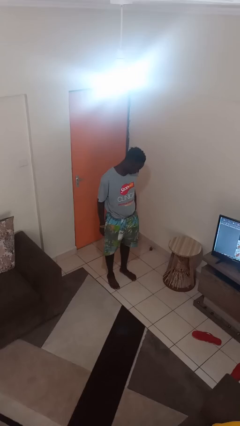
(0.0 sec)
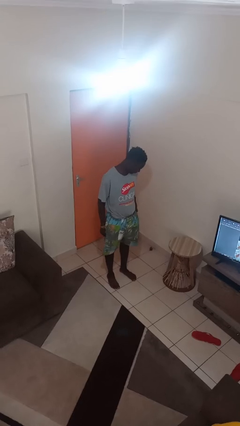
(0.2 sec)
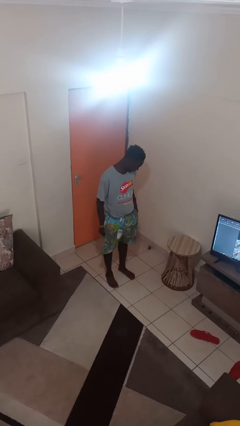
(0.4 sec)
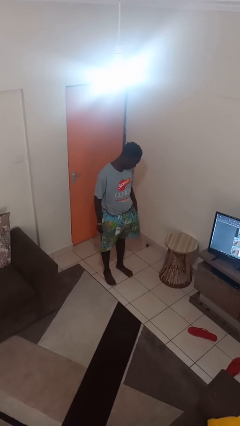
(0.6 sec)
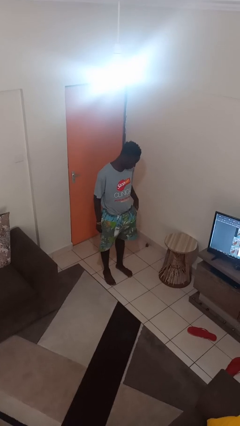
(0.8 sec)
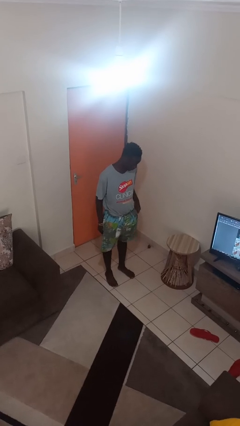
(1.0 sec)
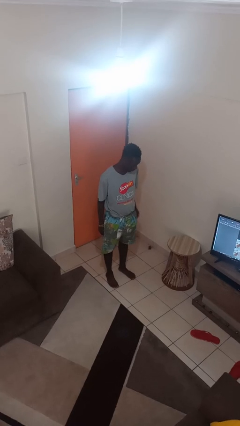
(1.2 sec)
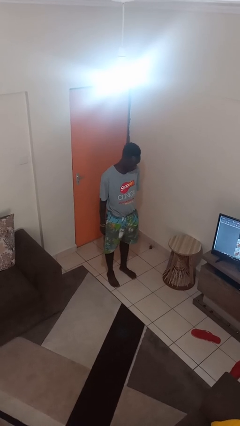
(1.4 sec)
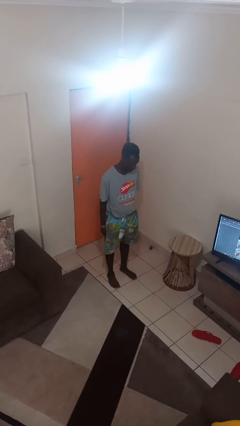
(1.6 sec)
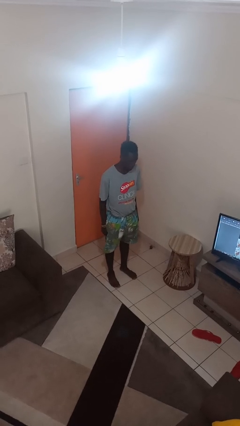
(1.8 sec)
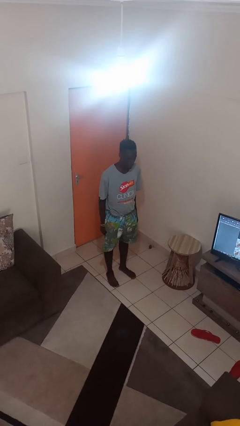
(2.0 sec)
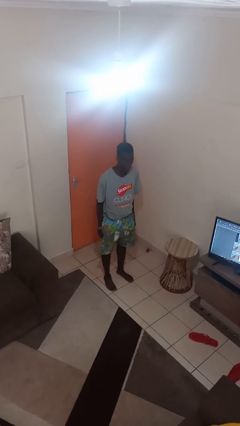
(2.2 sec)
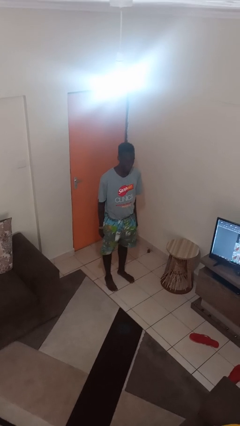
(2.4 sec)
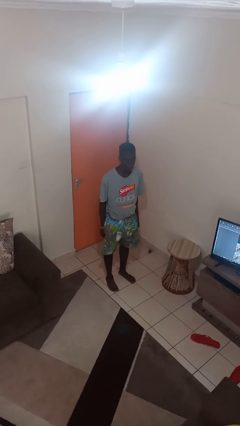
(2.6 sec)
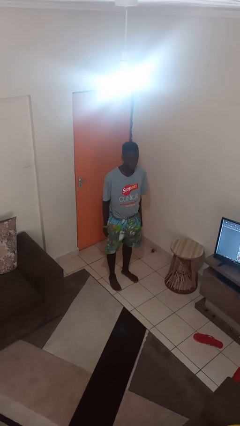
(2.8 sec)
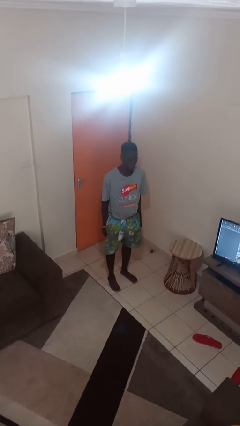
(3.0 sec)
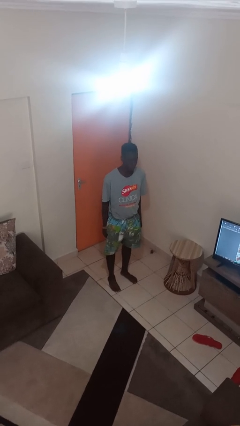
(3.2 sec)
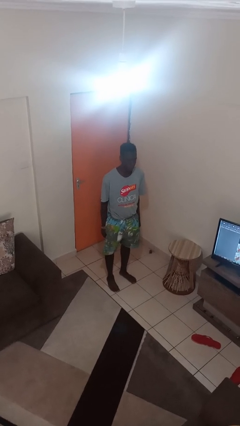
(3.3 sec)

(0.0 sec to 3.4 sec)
person puts phone into pocket

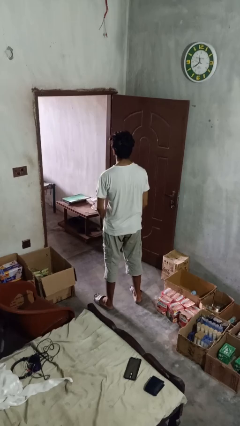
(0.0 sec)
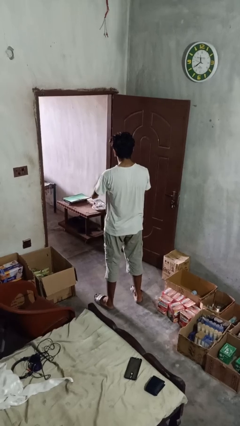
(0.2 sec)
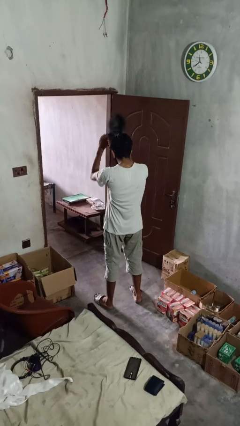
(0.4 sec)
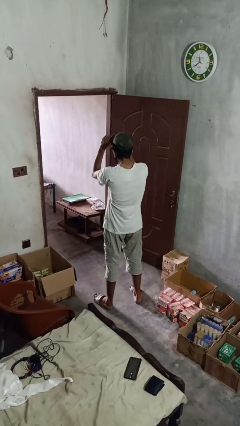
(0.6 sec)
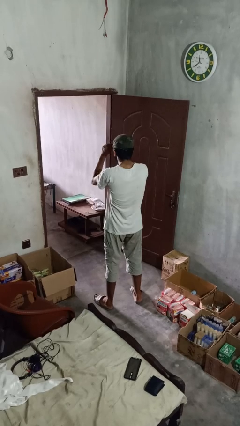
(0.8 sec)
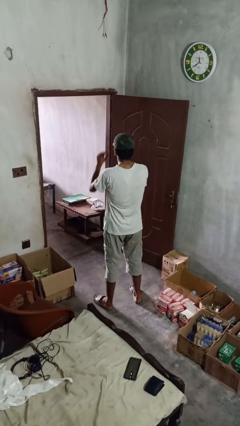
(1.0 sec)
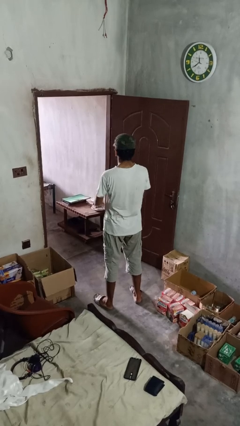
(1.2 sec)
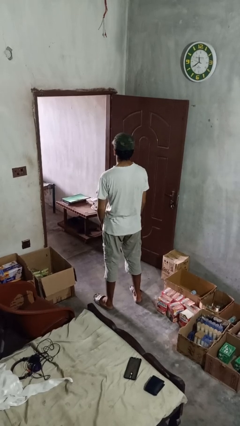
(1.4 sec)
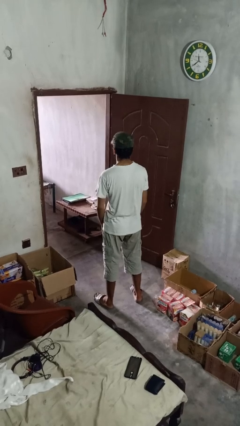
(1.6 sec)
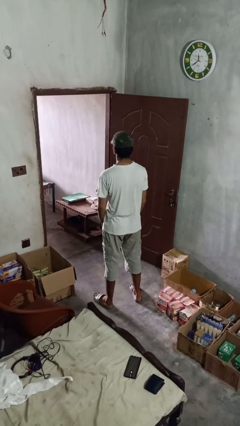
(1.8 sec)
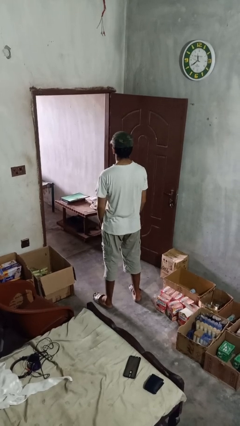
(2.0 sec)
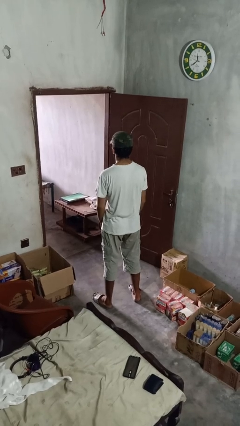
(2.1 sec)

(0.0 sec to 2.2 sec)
person puts on hat

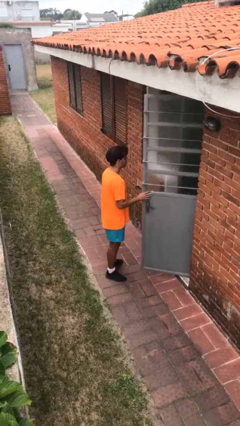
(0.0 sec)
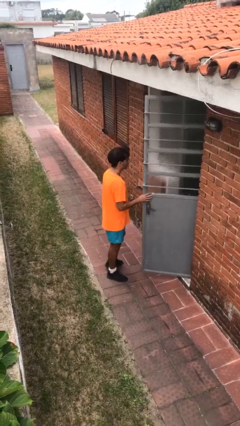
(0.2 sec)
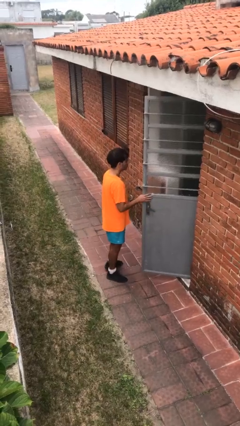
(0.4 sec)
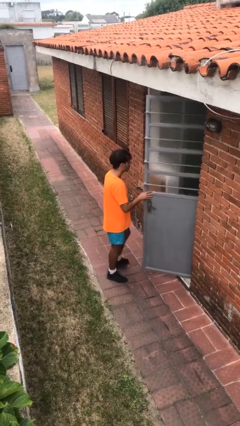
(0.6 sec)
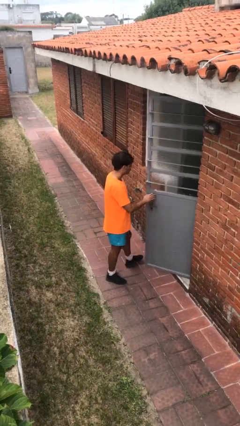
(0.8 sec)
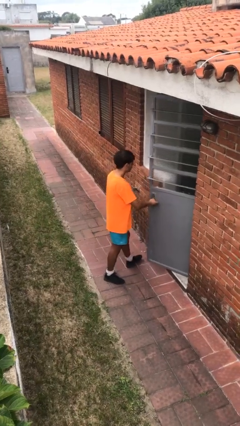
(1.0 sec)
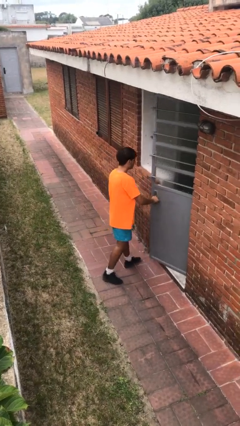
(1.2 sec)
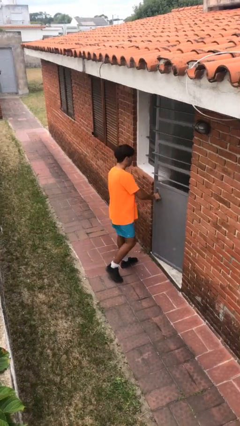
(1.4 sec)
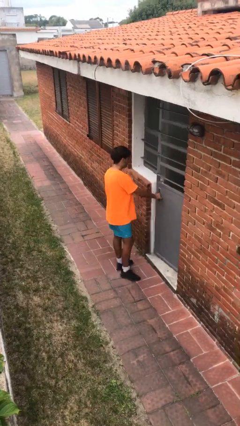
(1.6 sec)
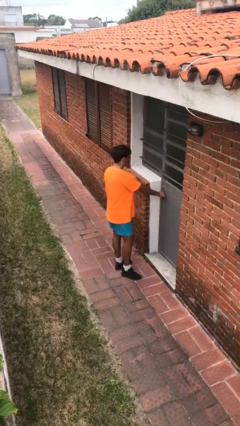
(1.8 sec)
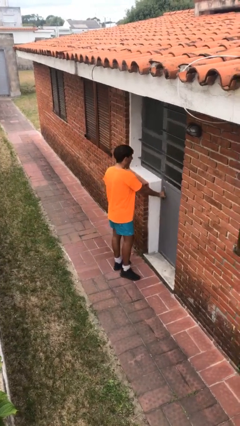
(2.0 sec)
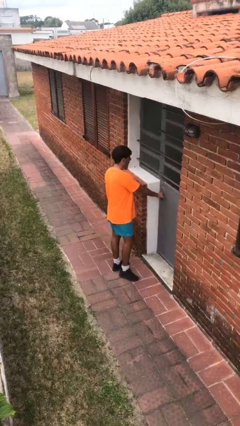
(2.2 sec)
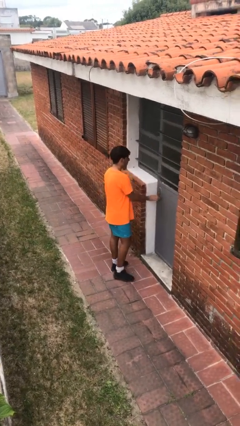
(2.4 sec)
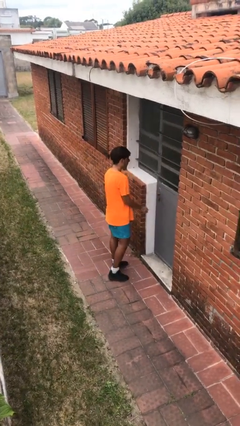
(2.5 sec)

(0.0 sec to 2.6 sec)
person closes facility door

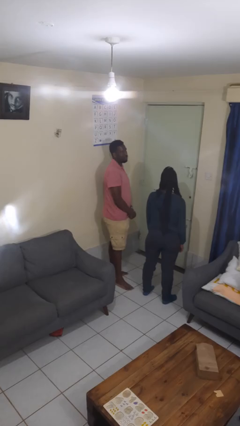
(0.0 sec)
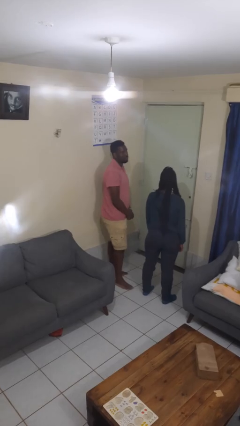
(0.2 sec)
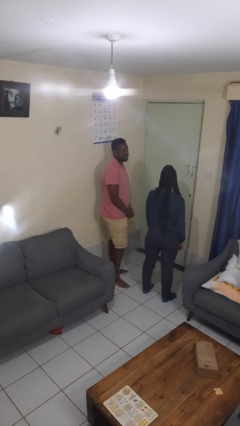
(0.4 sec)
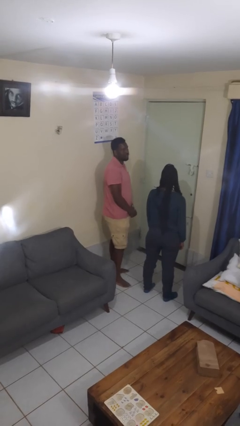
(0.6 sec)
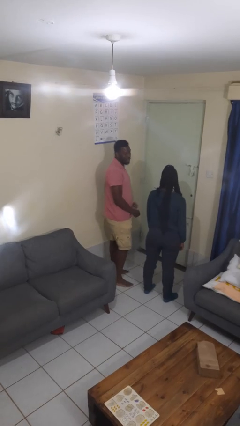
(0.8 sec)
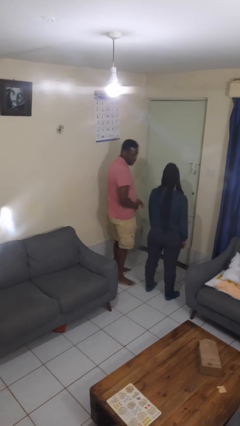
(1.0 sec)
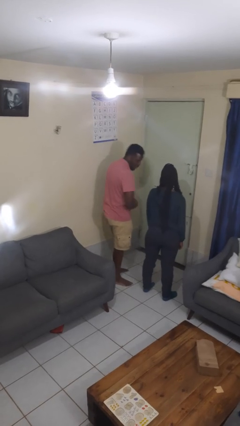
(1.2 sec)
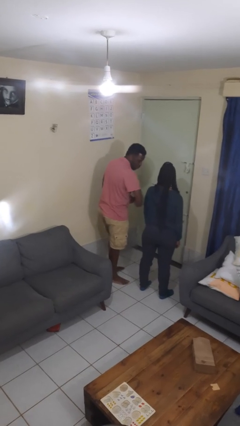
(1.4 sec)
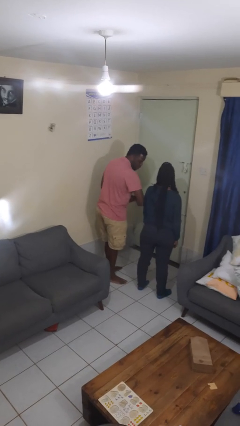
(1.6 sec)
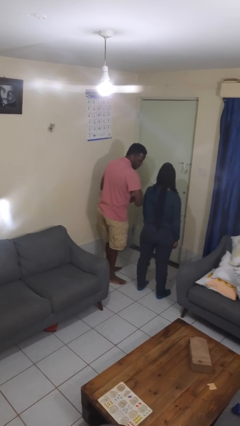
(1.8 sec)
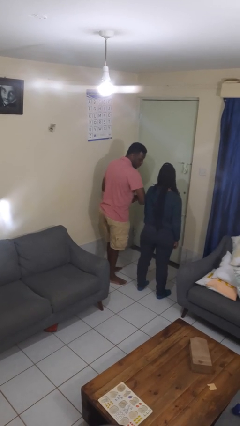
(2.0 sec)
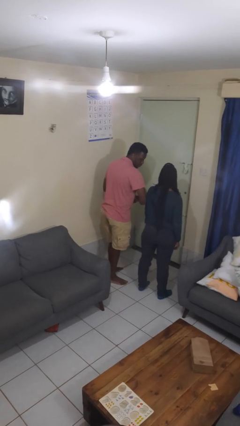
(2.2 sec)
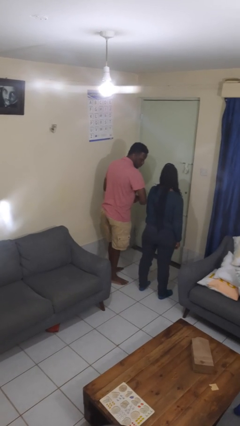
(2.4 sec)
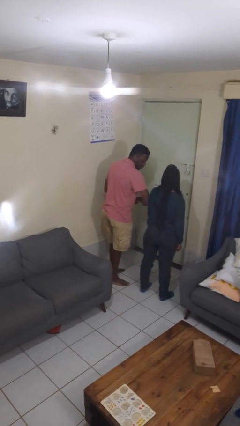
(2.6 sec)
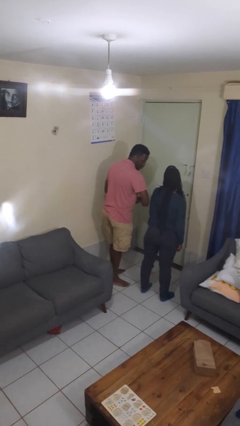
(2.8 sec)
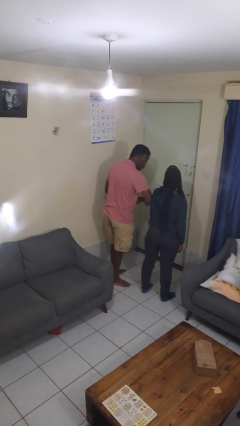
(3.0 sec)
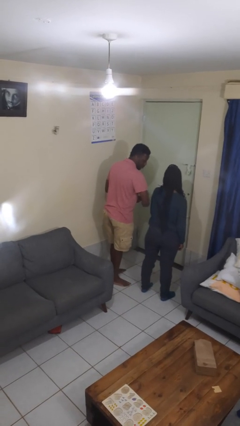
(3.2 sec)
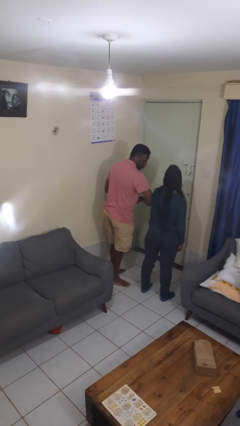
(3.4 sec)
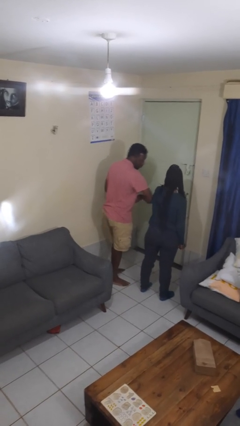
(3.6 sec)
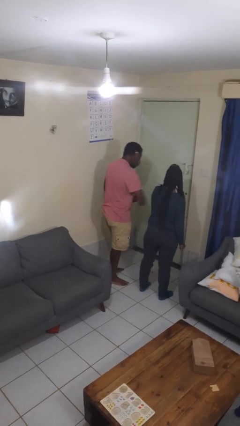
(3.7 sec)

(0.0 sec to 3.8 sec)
person nudges person with elbow

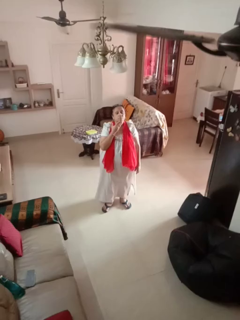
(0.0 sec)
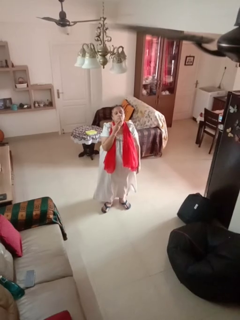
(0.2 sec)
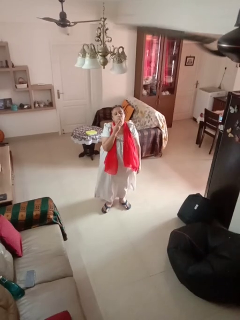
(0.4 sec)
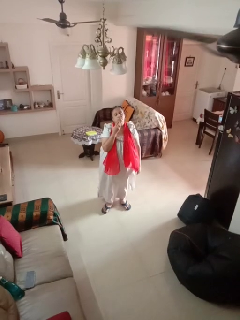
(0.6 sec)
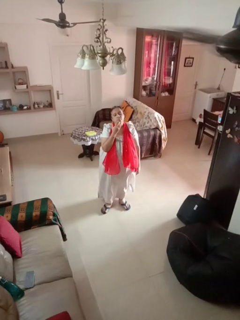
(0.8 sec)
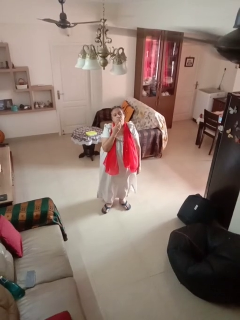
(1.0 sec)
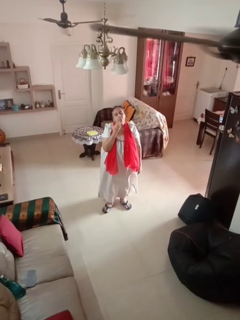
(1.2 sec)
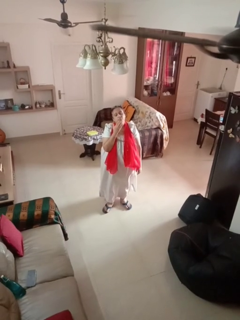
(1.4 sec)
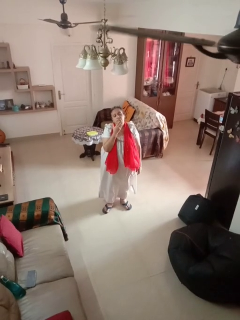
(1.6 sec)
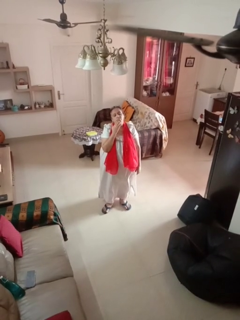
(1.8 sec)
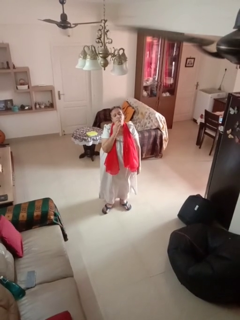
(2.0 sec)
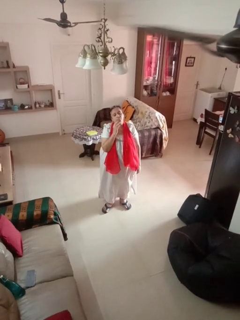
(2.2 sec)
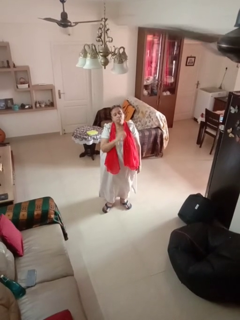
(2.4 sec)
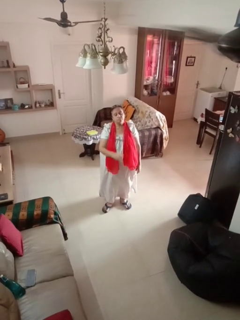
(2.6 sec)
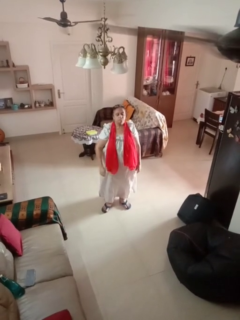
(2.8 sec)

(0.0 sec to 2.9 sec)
person scratches face

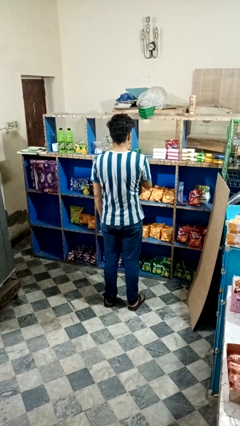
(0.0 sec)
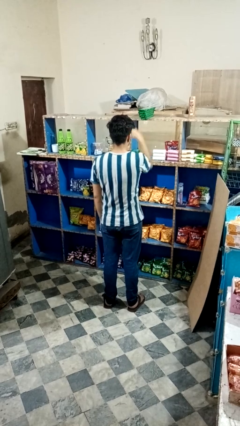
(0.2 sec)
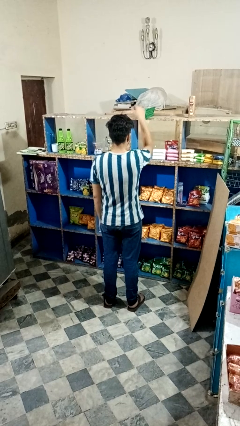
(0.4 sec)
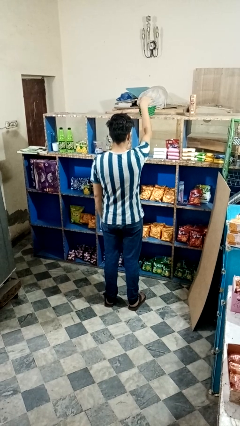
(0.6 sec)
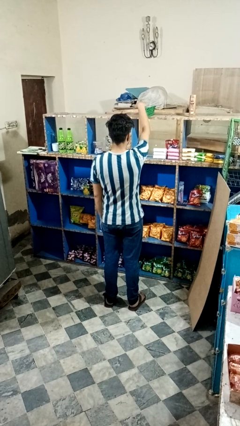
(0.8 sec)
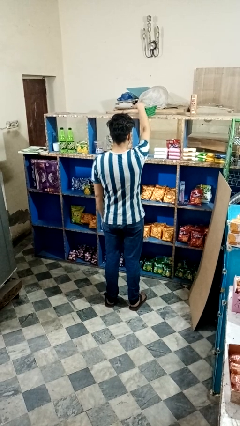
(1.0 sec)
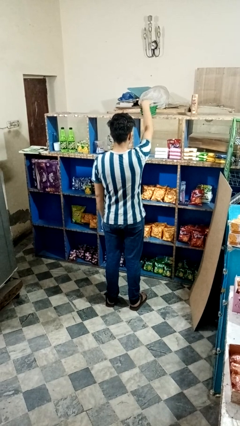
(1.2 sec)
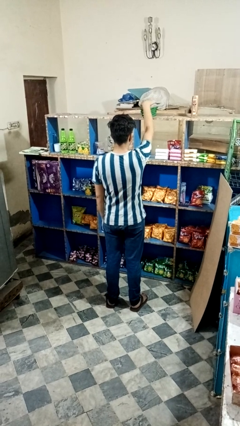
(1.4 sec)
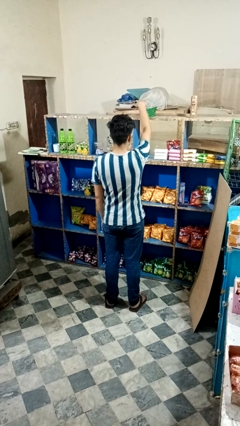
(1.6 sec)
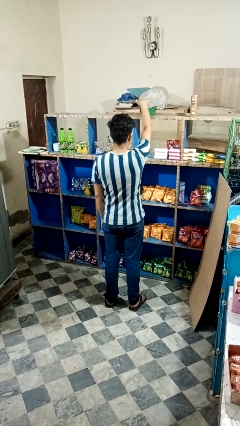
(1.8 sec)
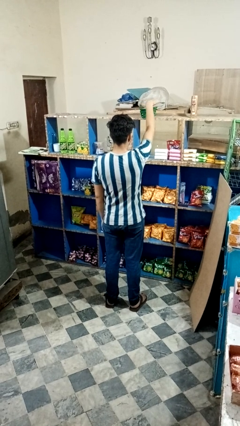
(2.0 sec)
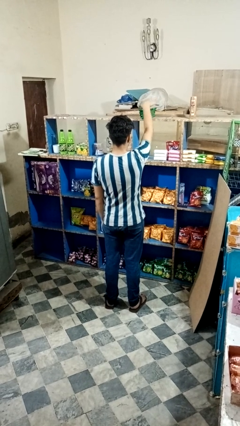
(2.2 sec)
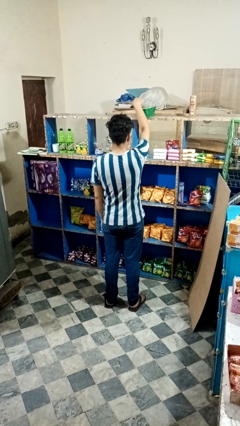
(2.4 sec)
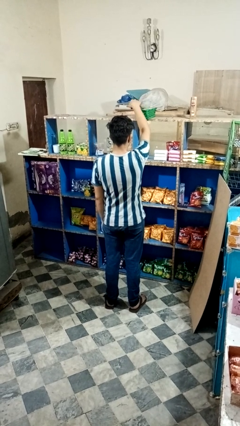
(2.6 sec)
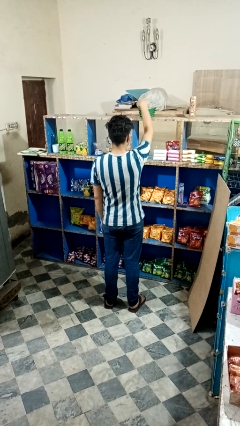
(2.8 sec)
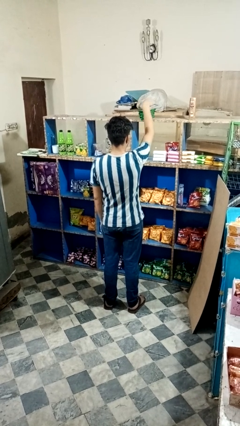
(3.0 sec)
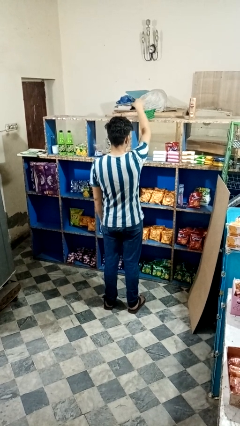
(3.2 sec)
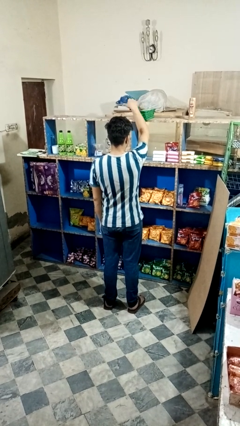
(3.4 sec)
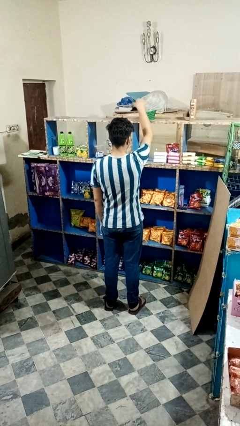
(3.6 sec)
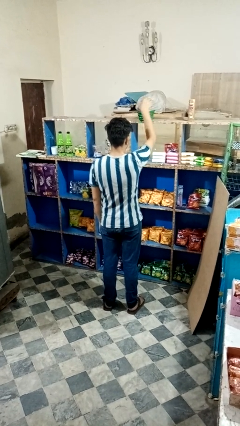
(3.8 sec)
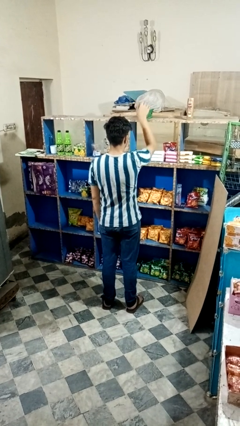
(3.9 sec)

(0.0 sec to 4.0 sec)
person waves hand over object
